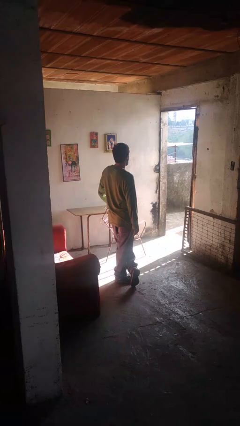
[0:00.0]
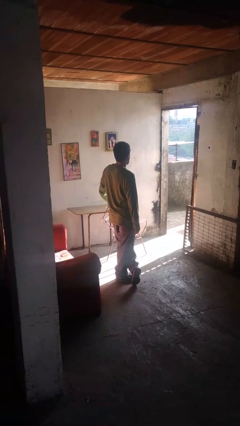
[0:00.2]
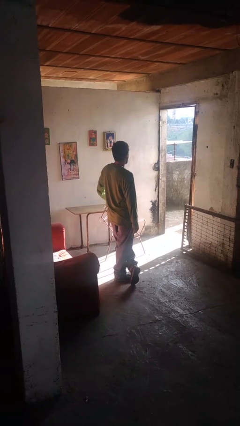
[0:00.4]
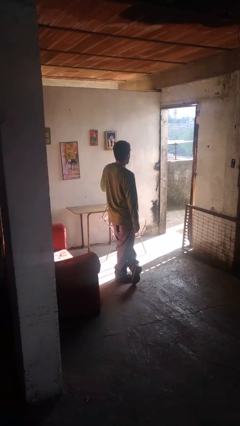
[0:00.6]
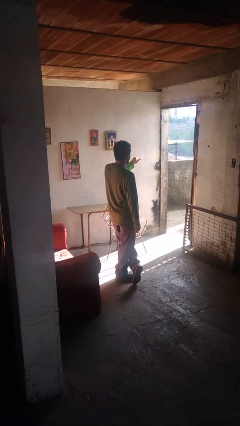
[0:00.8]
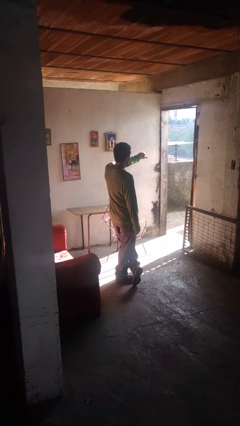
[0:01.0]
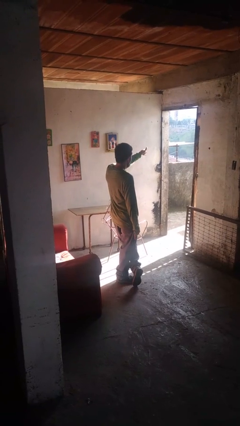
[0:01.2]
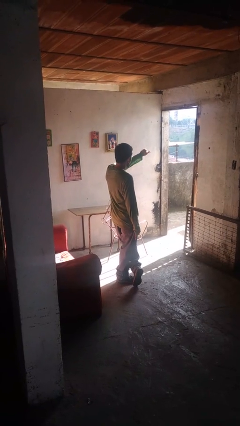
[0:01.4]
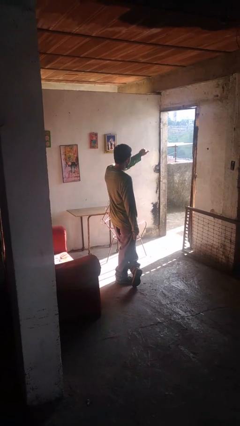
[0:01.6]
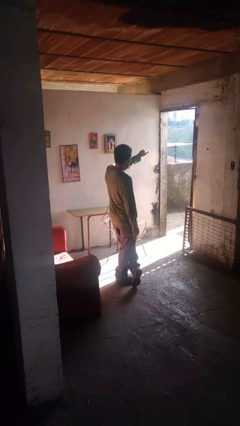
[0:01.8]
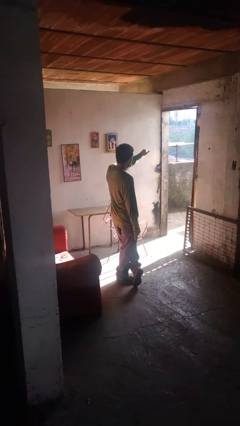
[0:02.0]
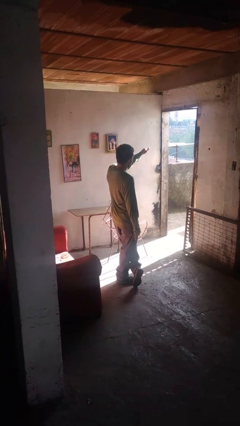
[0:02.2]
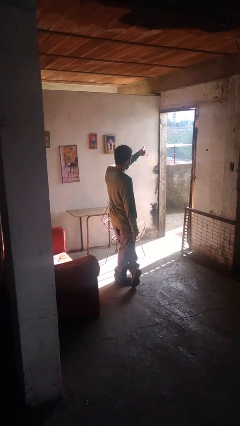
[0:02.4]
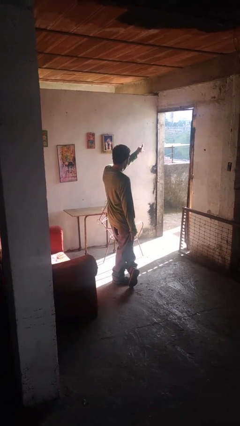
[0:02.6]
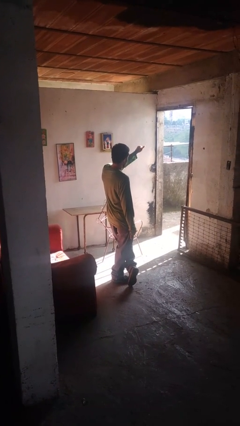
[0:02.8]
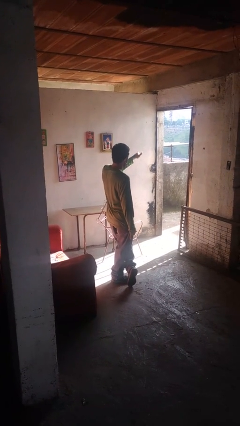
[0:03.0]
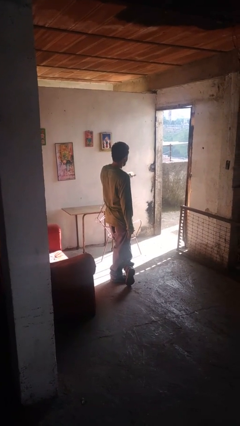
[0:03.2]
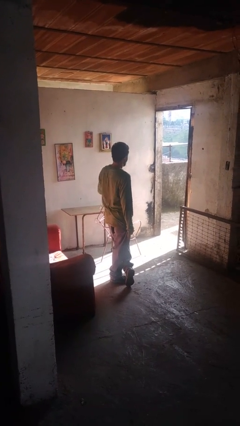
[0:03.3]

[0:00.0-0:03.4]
person gestures hang loose

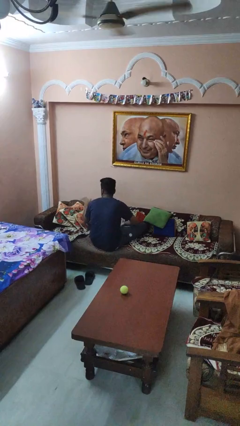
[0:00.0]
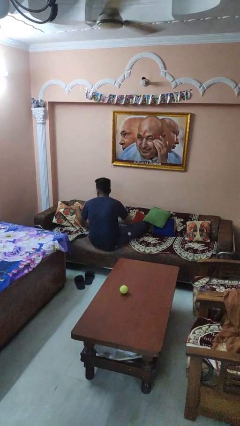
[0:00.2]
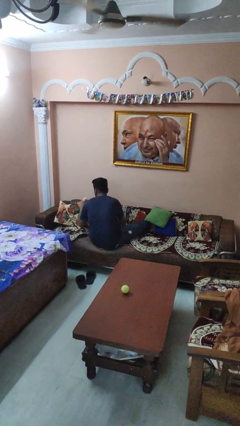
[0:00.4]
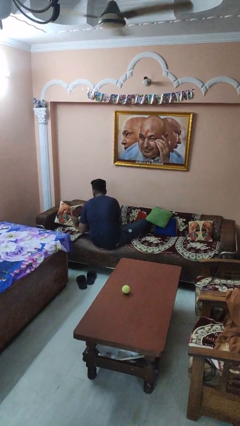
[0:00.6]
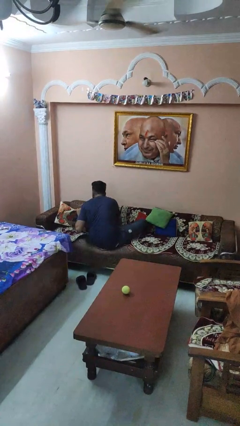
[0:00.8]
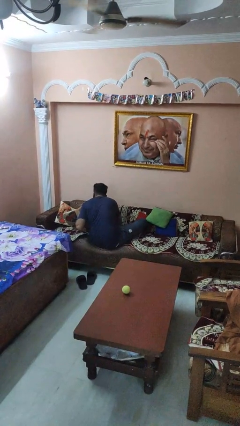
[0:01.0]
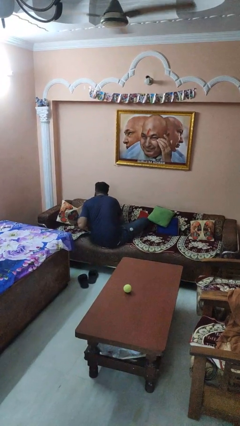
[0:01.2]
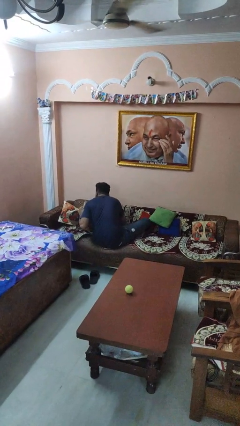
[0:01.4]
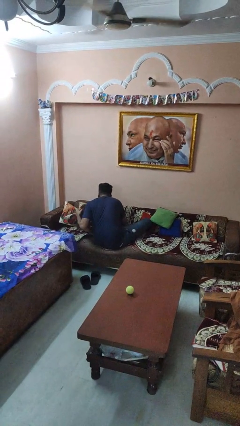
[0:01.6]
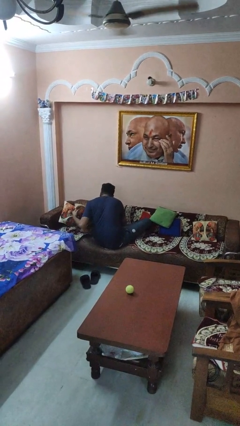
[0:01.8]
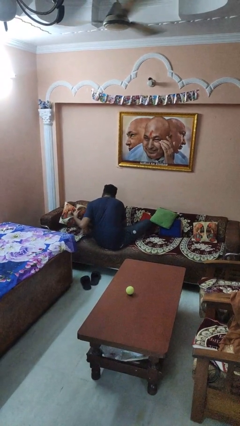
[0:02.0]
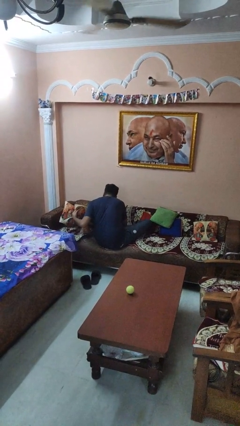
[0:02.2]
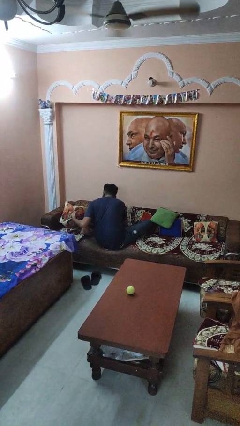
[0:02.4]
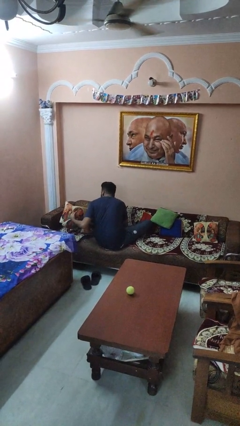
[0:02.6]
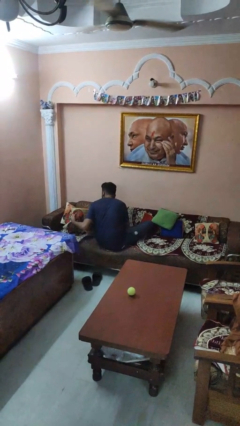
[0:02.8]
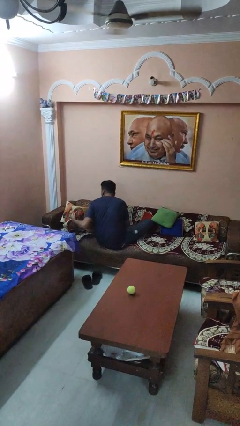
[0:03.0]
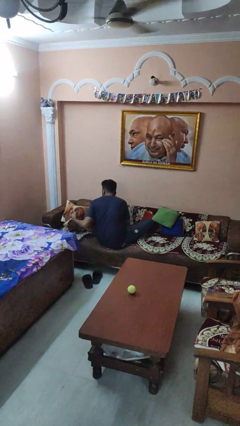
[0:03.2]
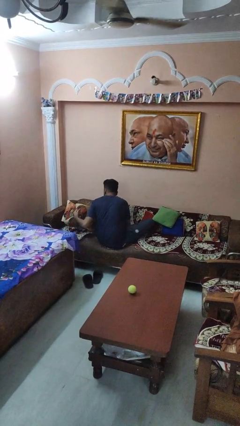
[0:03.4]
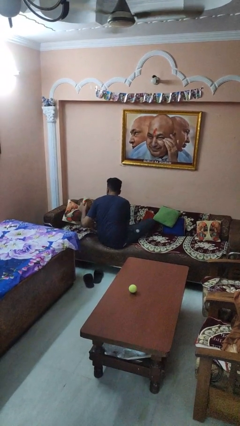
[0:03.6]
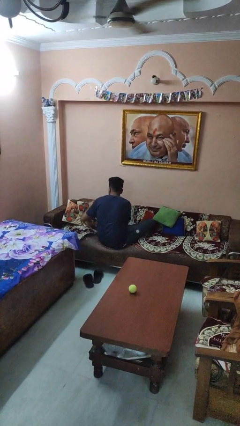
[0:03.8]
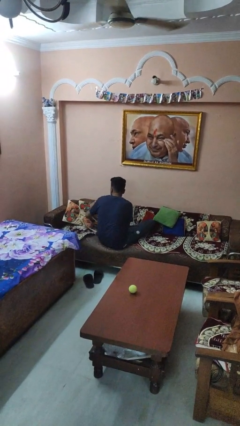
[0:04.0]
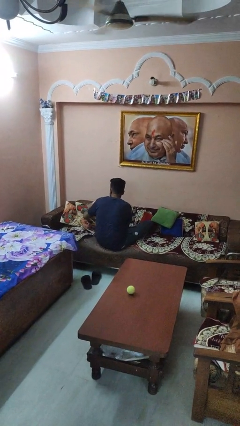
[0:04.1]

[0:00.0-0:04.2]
person searches in couch

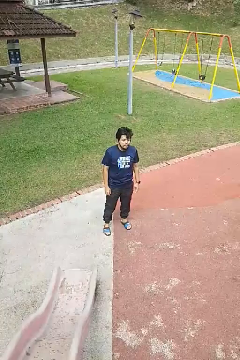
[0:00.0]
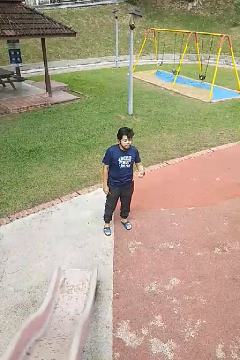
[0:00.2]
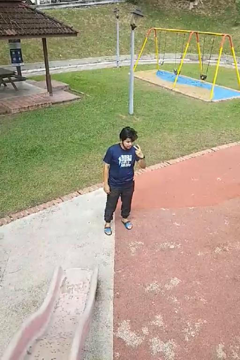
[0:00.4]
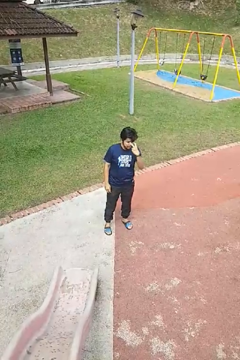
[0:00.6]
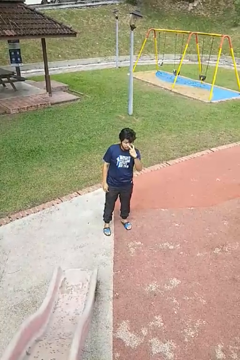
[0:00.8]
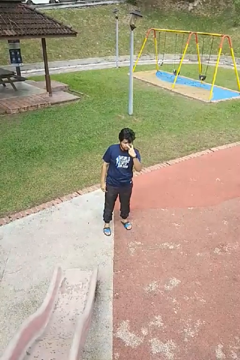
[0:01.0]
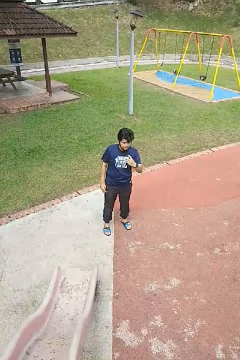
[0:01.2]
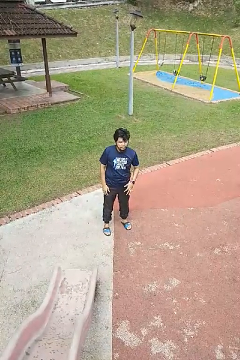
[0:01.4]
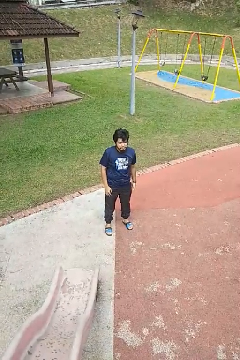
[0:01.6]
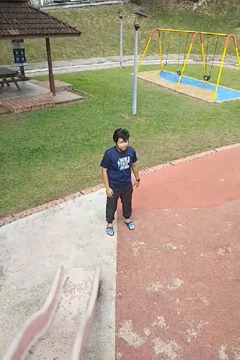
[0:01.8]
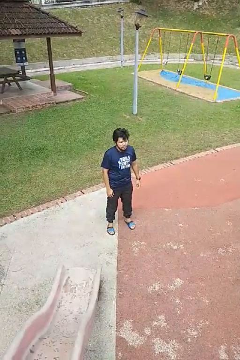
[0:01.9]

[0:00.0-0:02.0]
person gestures watch closely

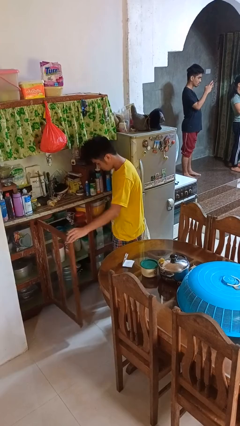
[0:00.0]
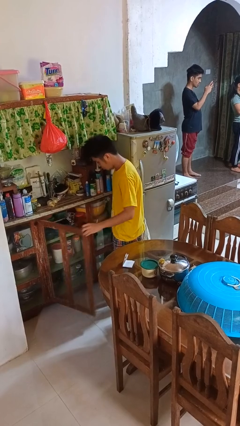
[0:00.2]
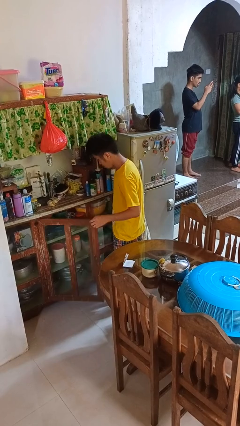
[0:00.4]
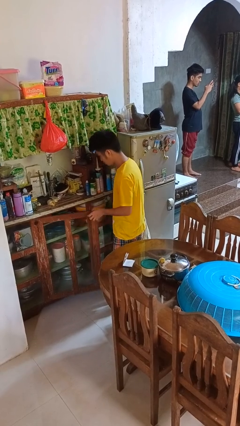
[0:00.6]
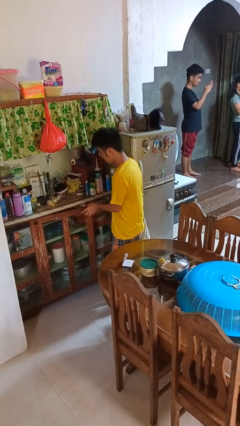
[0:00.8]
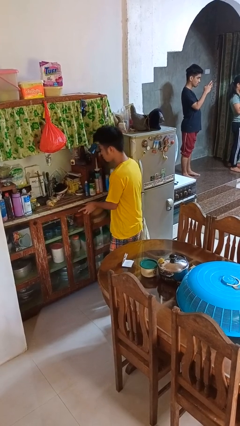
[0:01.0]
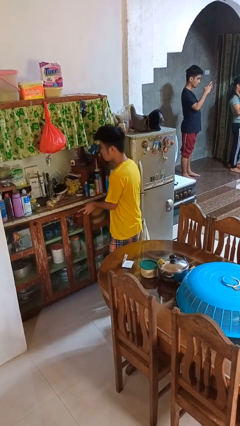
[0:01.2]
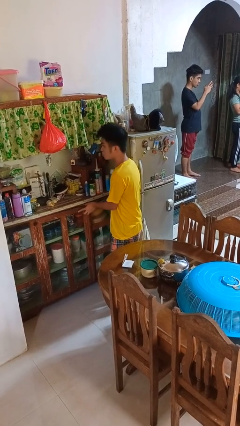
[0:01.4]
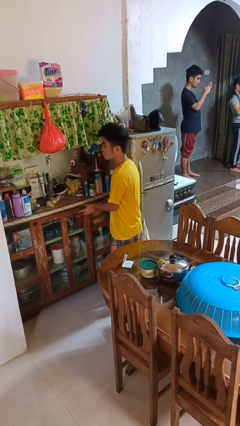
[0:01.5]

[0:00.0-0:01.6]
person closes cabinet

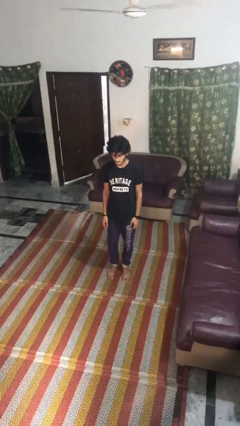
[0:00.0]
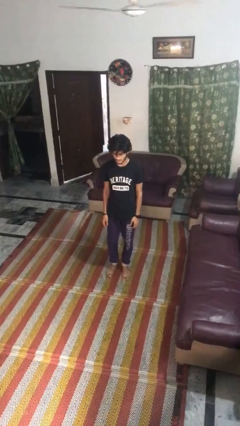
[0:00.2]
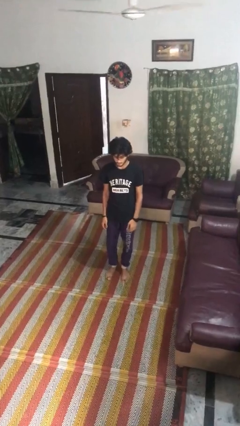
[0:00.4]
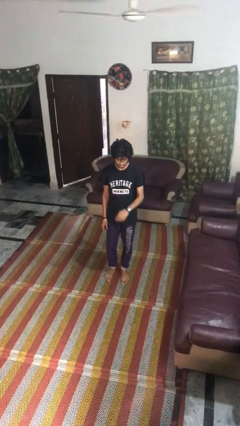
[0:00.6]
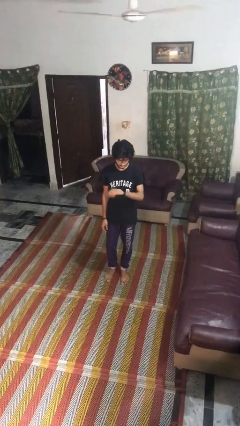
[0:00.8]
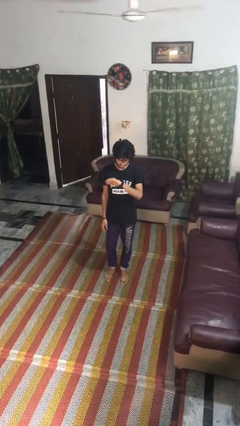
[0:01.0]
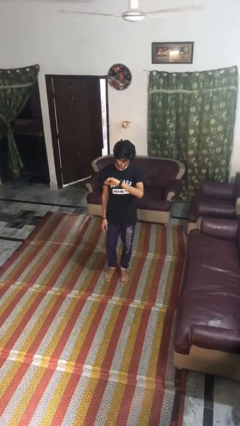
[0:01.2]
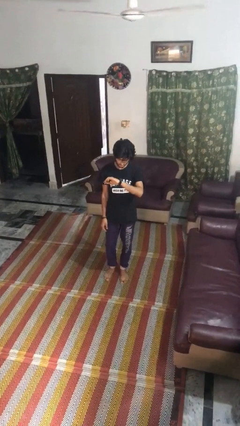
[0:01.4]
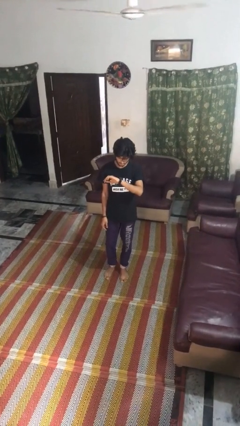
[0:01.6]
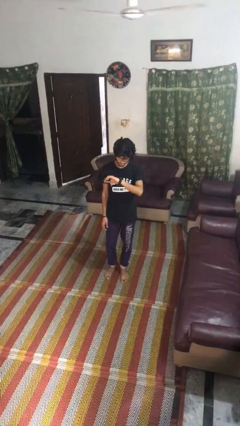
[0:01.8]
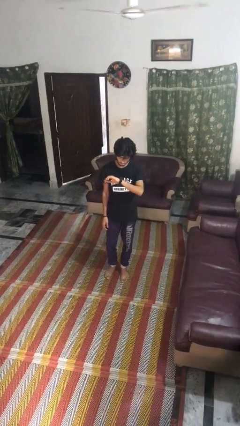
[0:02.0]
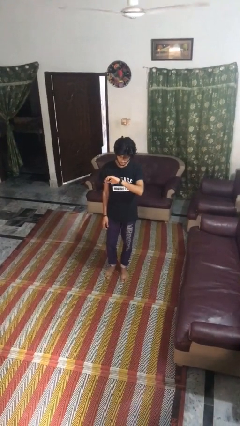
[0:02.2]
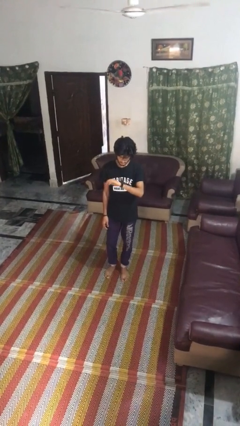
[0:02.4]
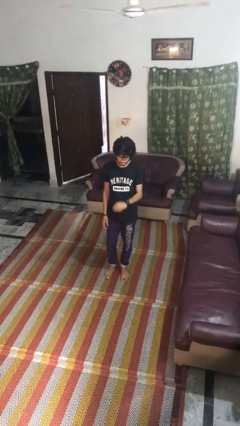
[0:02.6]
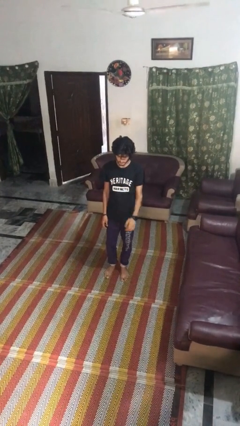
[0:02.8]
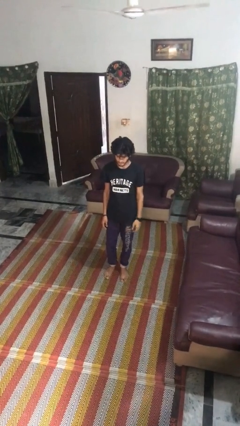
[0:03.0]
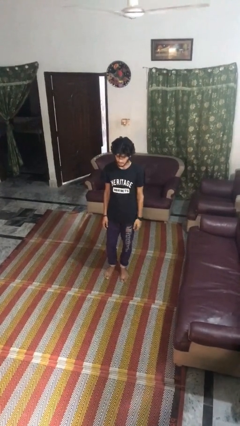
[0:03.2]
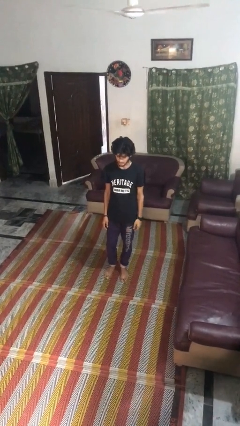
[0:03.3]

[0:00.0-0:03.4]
person looks at wristwatch

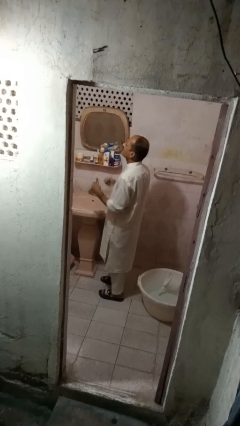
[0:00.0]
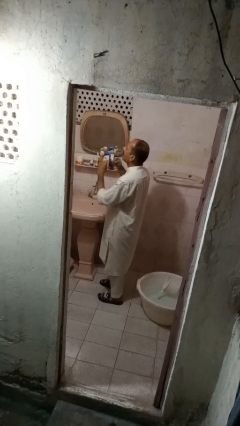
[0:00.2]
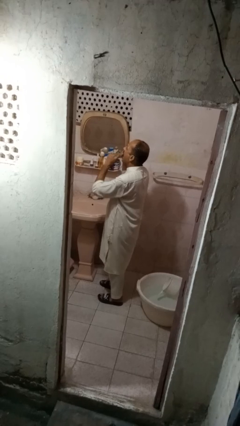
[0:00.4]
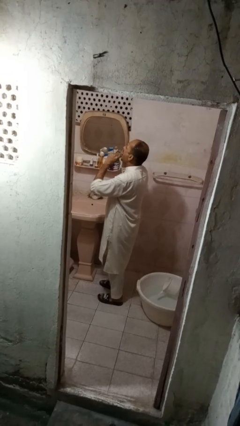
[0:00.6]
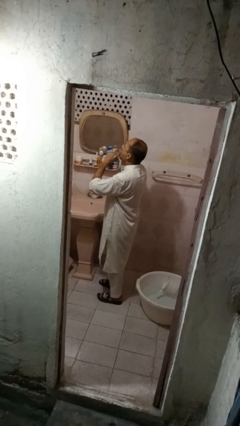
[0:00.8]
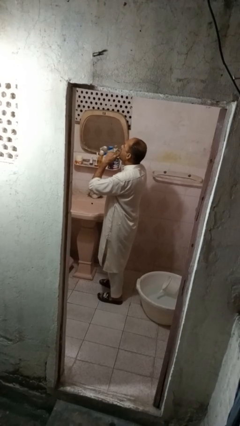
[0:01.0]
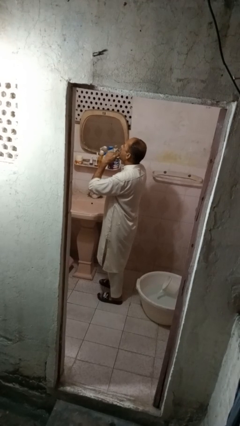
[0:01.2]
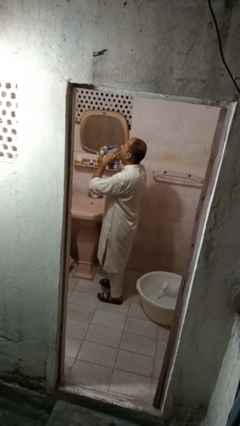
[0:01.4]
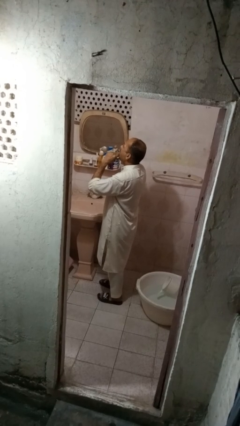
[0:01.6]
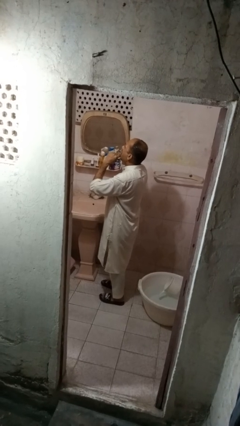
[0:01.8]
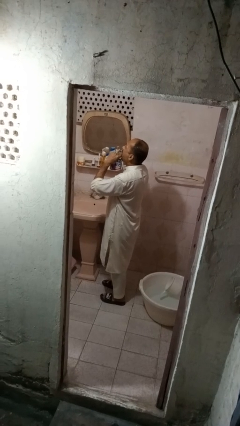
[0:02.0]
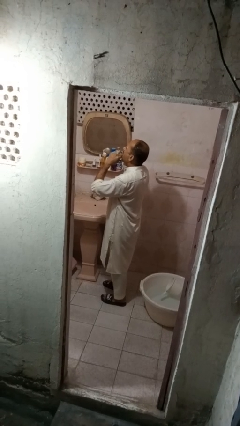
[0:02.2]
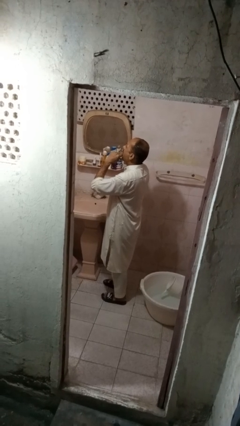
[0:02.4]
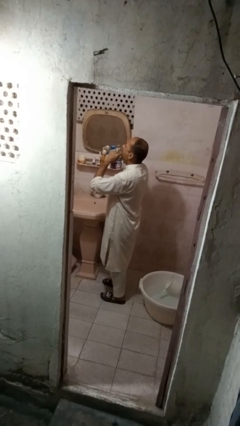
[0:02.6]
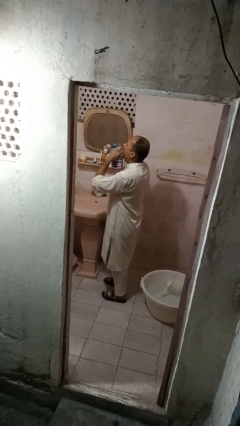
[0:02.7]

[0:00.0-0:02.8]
person flosses

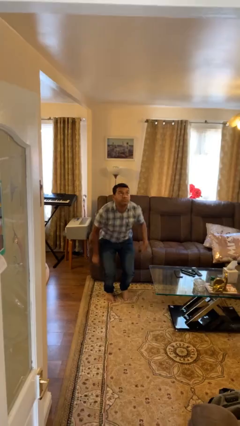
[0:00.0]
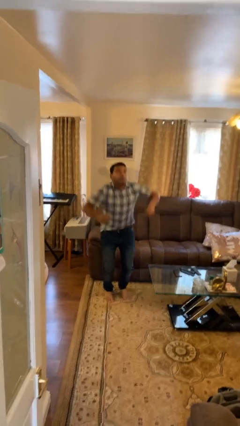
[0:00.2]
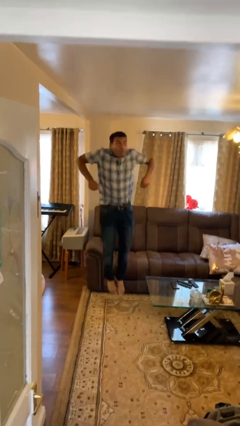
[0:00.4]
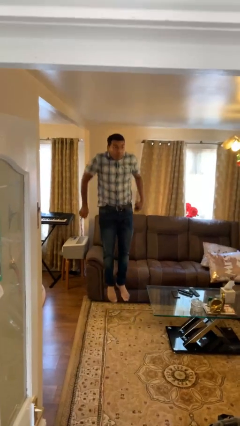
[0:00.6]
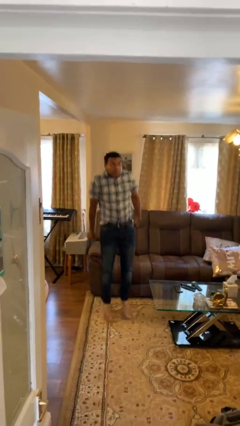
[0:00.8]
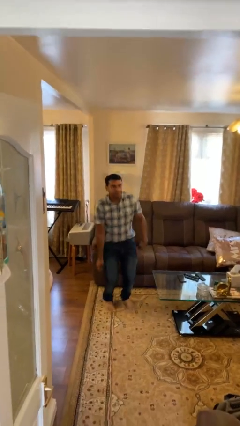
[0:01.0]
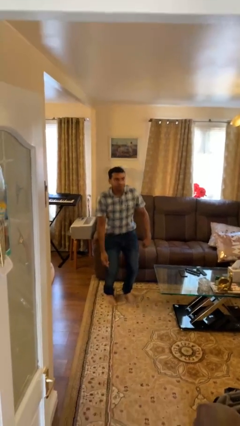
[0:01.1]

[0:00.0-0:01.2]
person jumps
